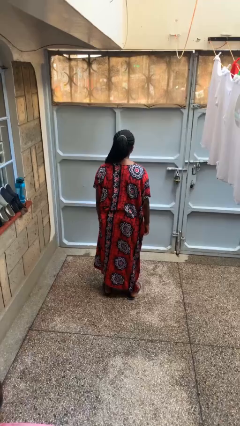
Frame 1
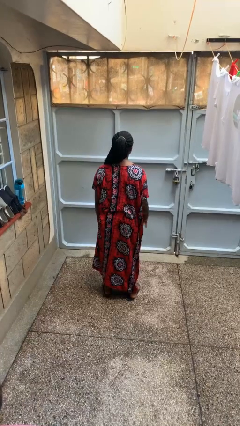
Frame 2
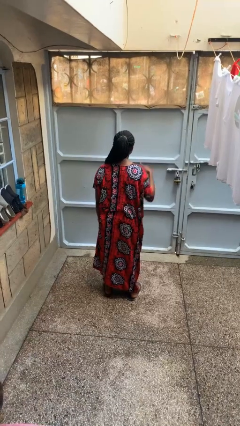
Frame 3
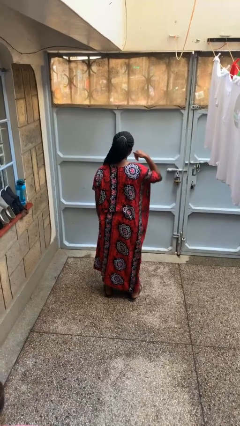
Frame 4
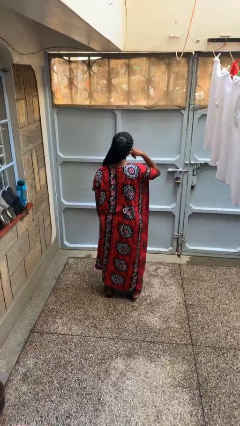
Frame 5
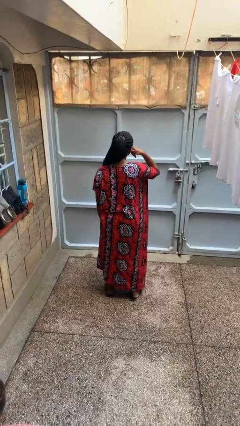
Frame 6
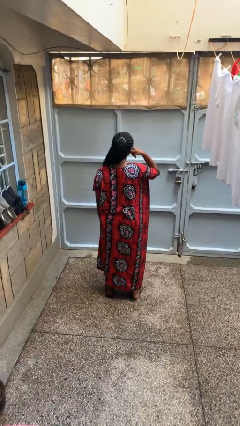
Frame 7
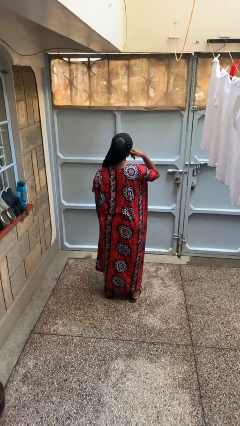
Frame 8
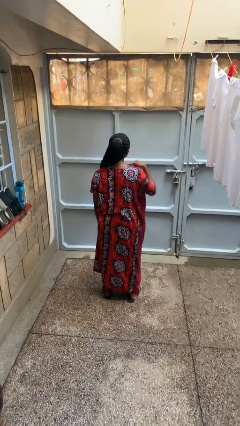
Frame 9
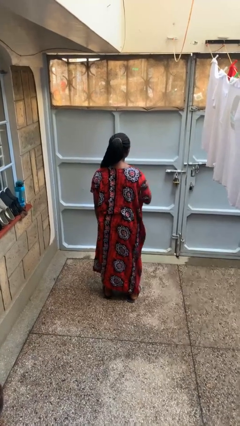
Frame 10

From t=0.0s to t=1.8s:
person gestures call me

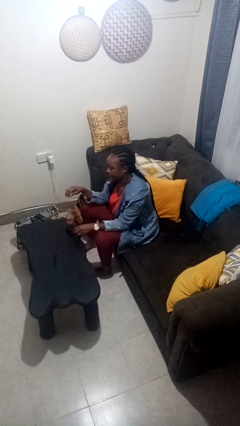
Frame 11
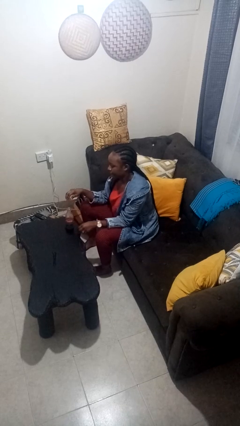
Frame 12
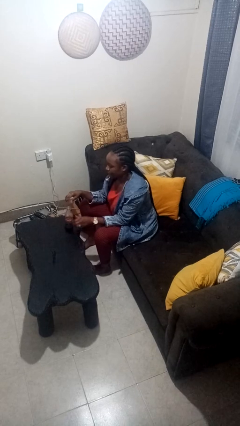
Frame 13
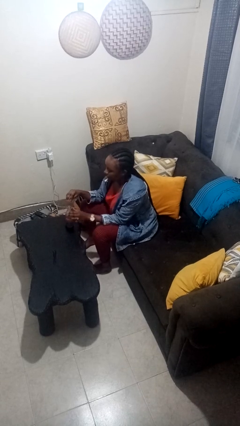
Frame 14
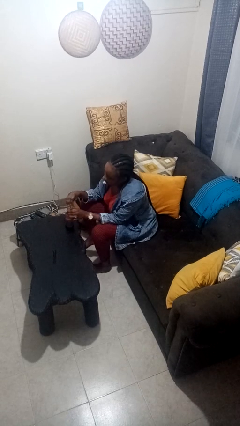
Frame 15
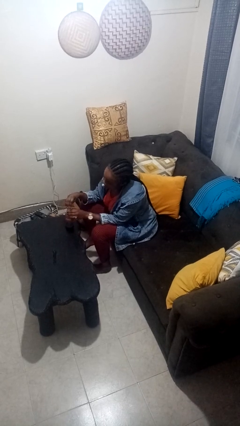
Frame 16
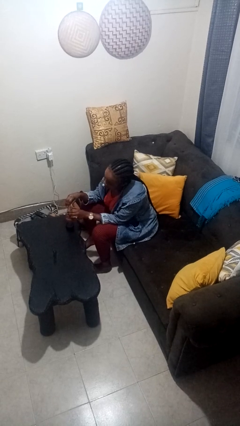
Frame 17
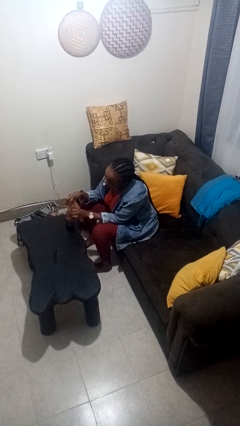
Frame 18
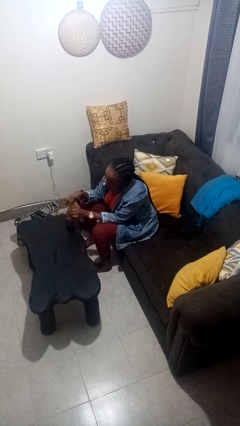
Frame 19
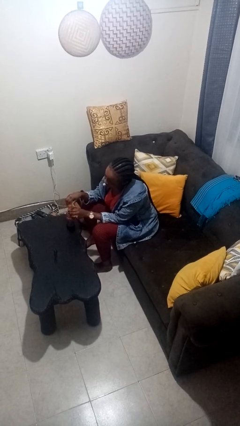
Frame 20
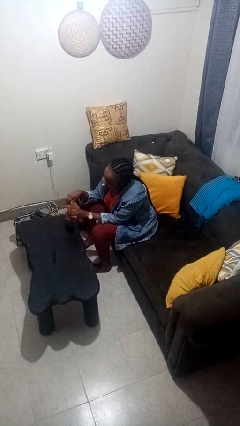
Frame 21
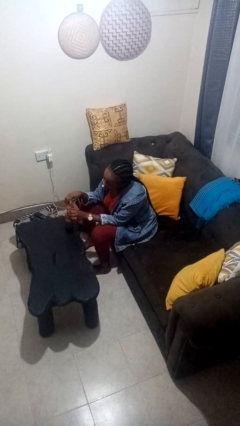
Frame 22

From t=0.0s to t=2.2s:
person screws lid to bottle

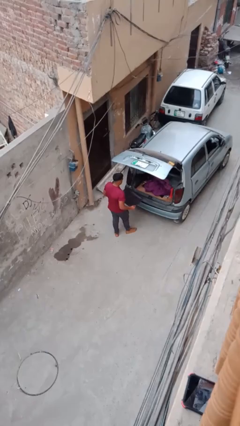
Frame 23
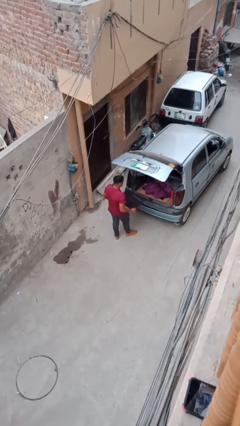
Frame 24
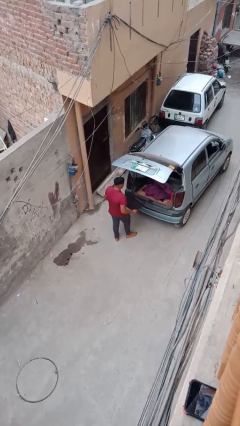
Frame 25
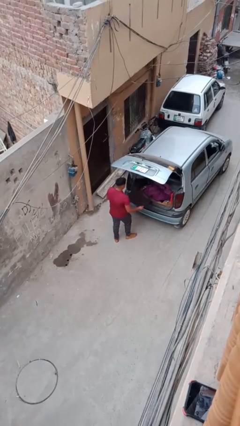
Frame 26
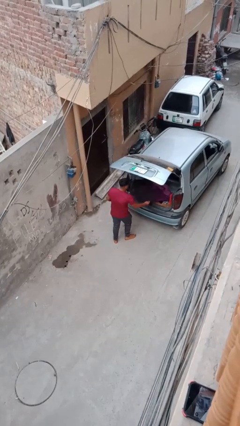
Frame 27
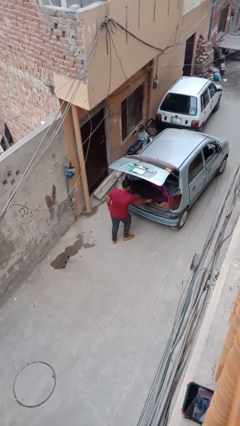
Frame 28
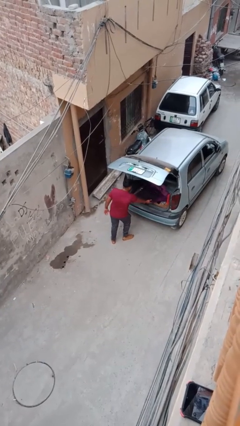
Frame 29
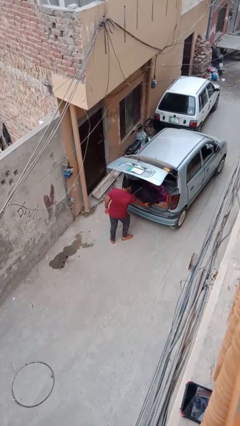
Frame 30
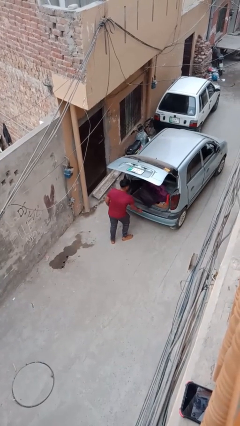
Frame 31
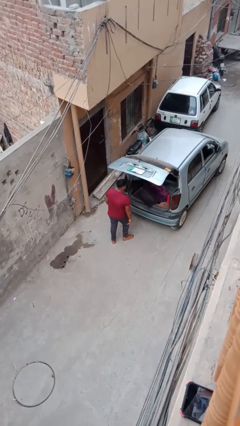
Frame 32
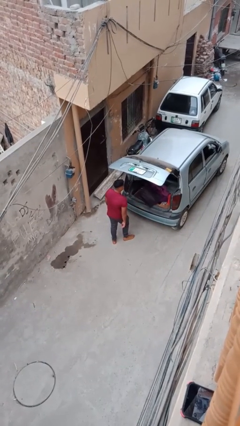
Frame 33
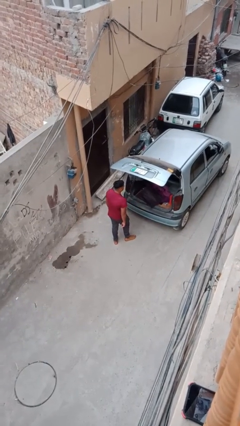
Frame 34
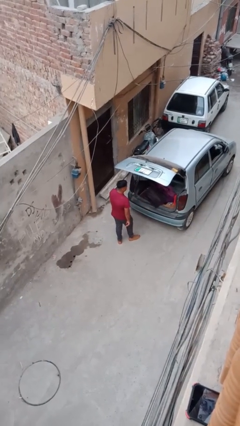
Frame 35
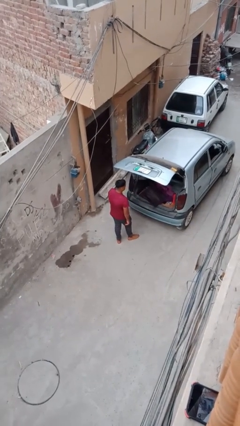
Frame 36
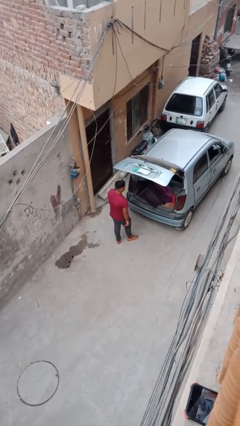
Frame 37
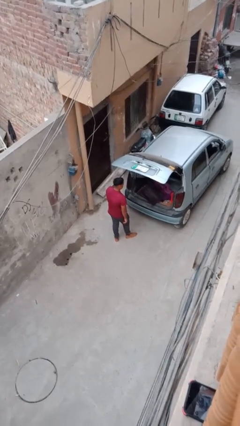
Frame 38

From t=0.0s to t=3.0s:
person loads car

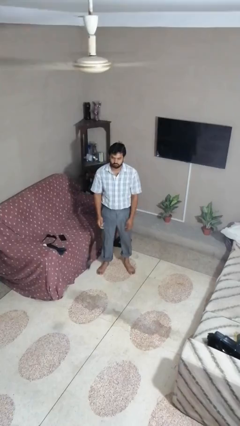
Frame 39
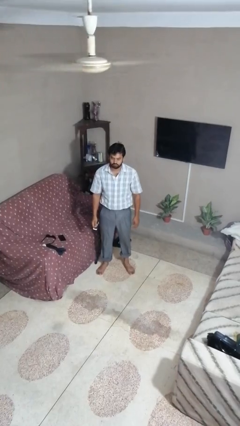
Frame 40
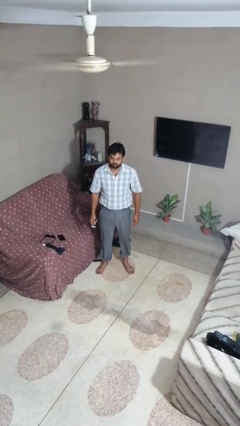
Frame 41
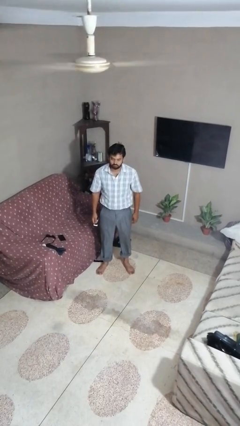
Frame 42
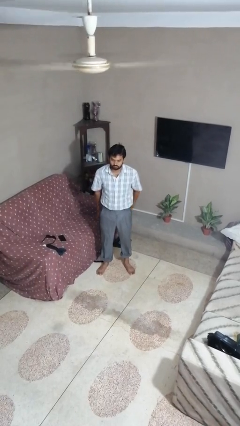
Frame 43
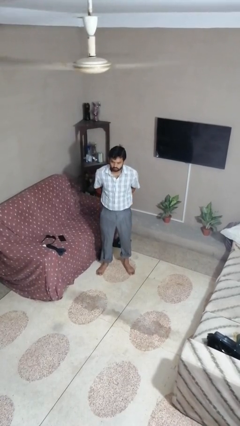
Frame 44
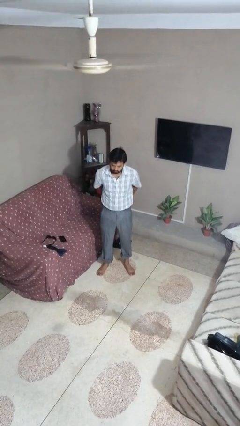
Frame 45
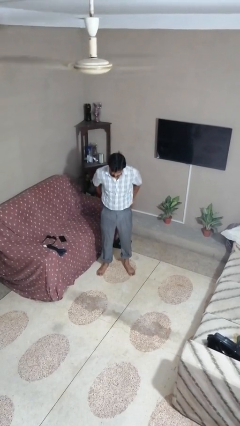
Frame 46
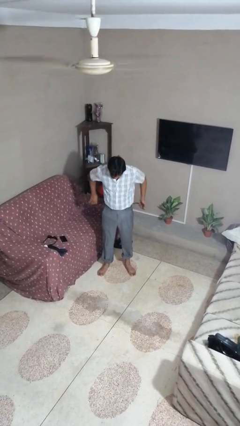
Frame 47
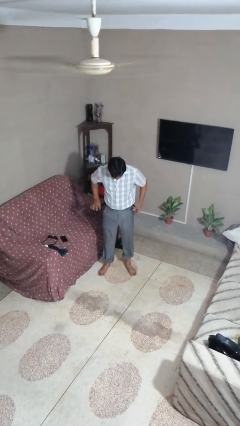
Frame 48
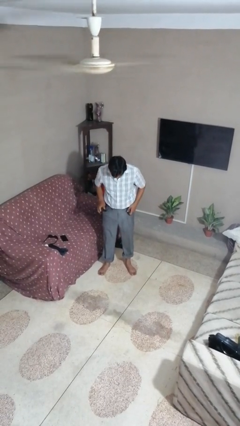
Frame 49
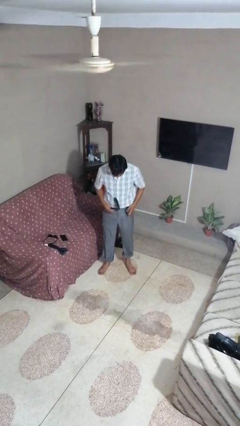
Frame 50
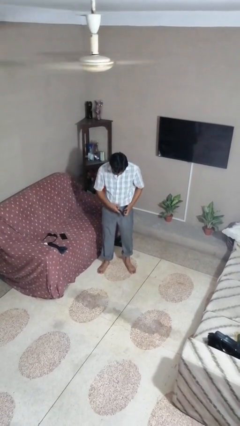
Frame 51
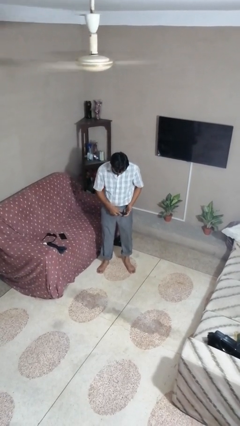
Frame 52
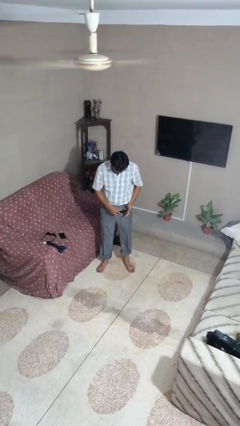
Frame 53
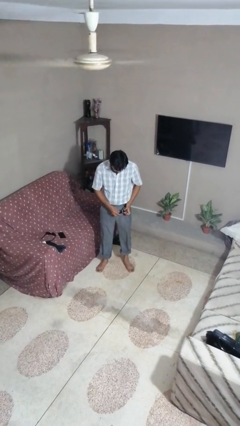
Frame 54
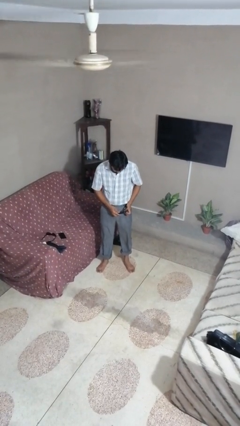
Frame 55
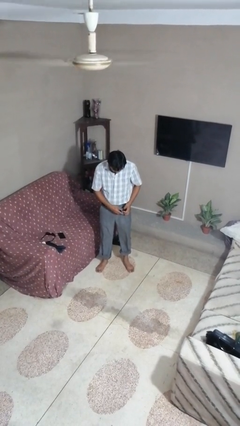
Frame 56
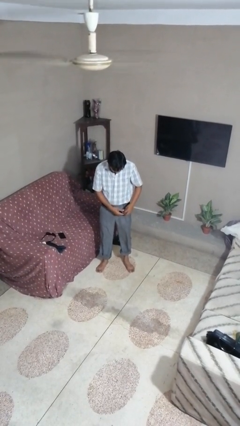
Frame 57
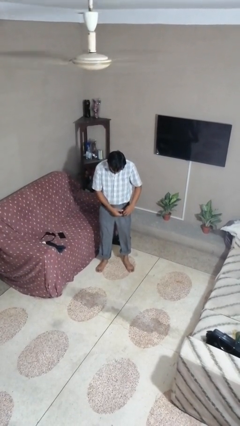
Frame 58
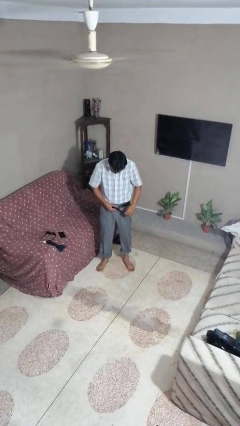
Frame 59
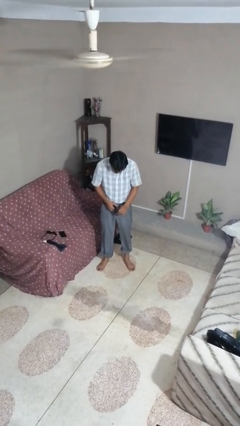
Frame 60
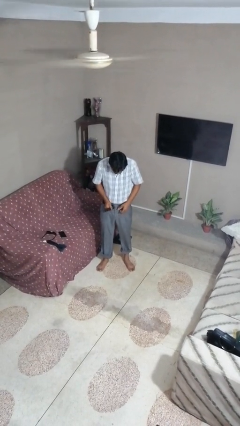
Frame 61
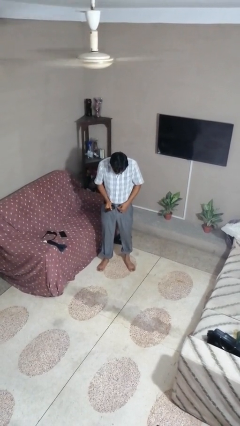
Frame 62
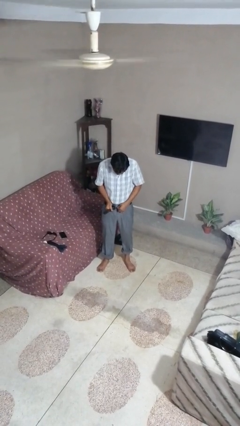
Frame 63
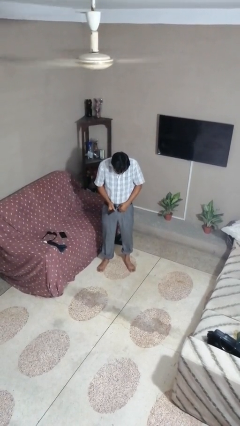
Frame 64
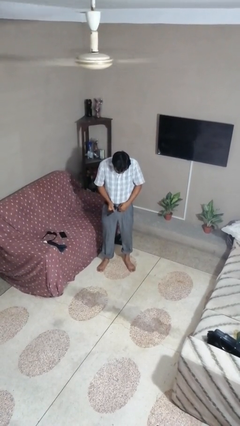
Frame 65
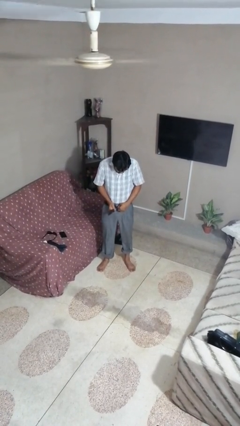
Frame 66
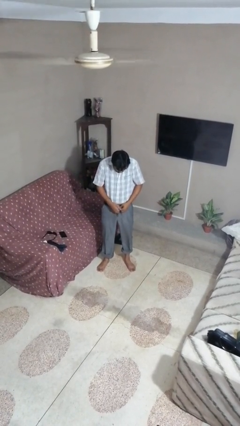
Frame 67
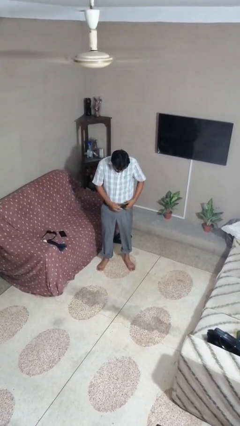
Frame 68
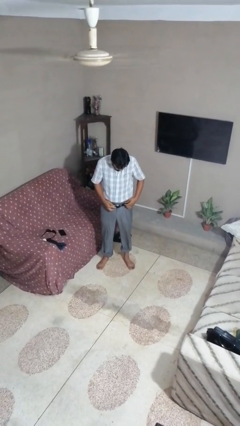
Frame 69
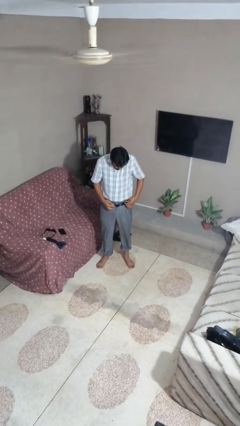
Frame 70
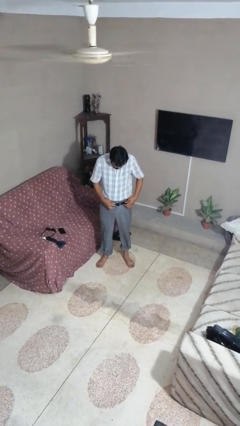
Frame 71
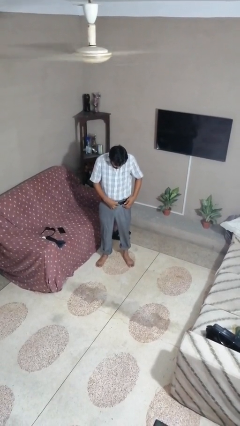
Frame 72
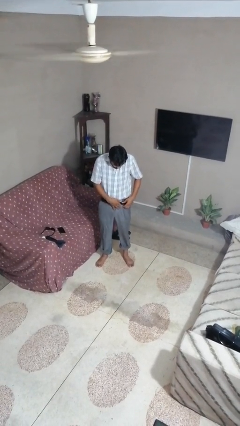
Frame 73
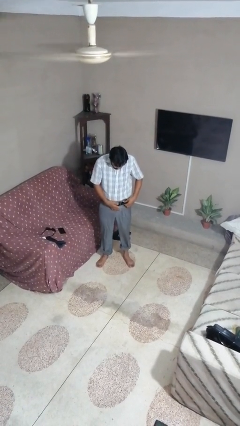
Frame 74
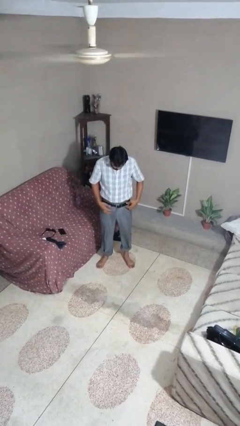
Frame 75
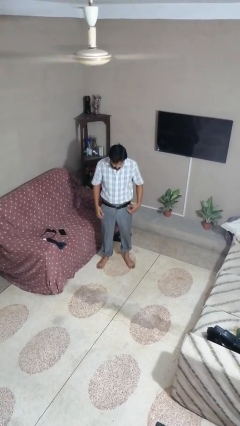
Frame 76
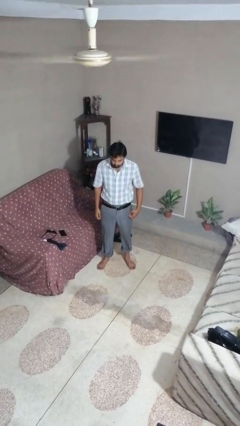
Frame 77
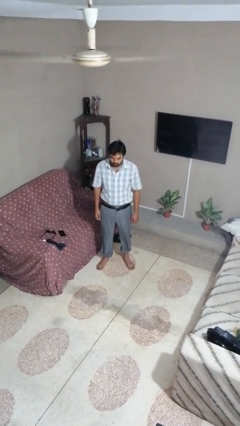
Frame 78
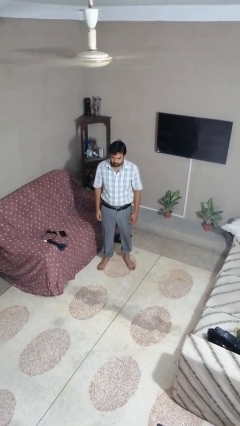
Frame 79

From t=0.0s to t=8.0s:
person puts on belt

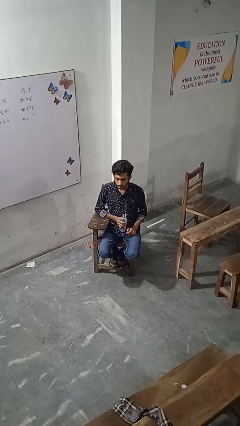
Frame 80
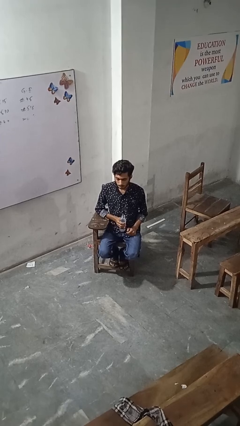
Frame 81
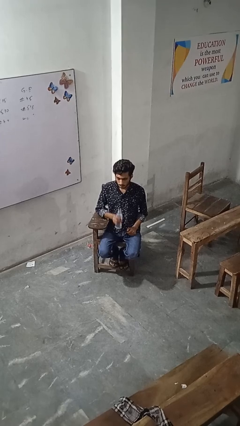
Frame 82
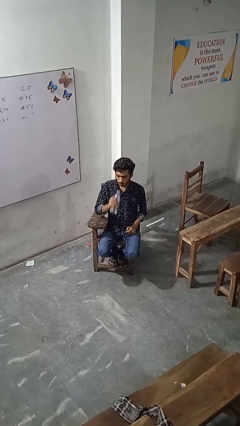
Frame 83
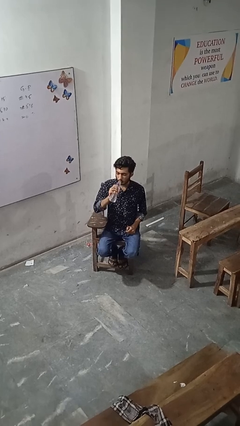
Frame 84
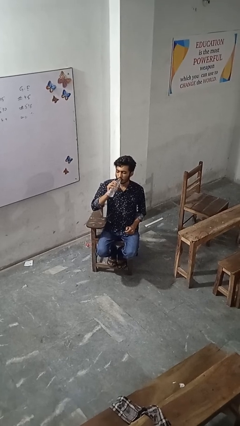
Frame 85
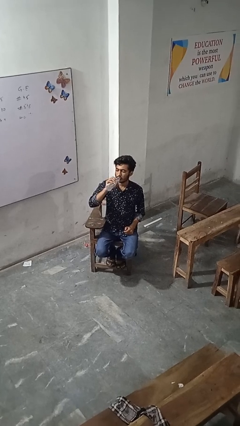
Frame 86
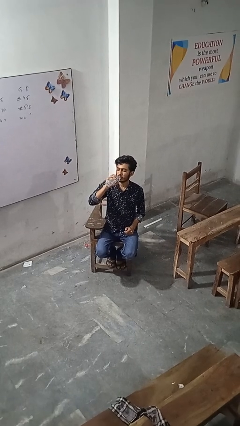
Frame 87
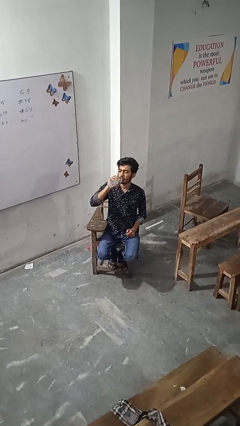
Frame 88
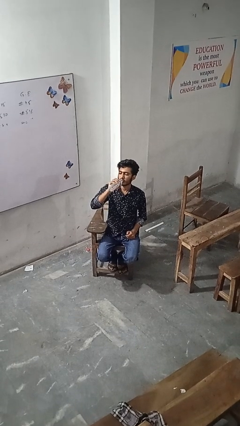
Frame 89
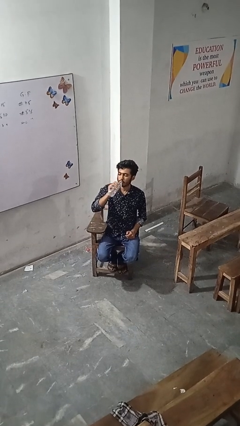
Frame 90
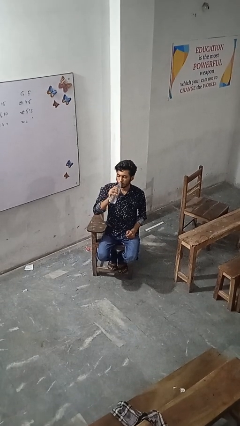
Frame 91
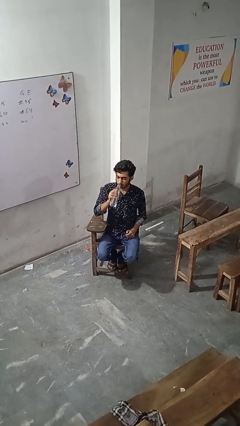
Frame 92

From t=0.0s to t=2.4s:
person drinks from bottle
